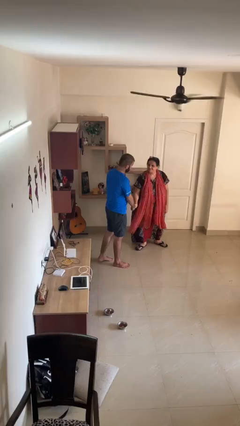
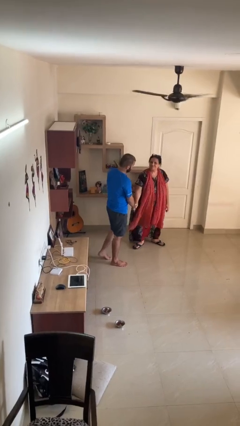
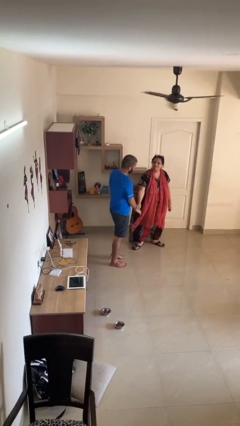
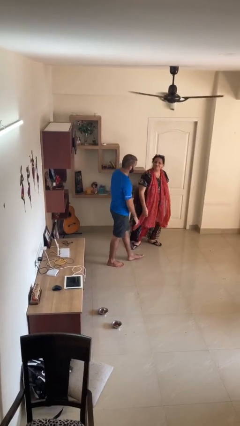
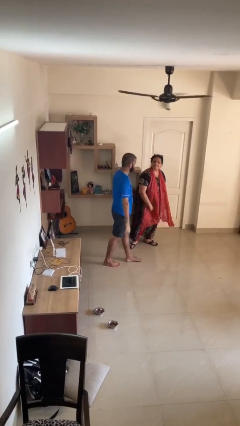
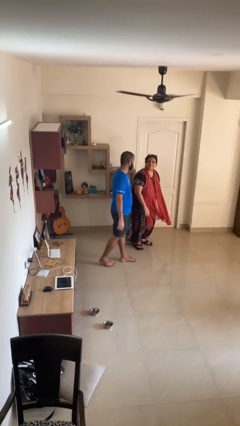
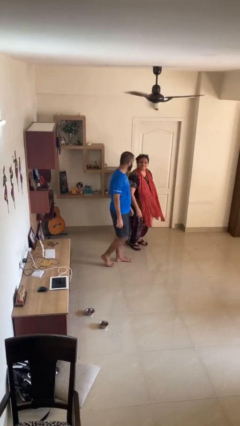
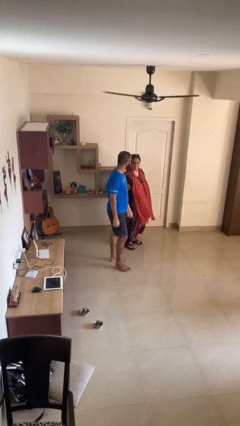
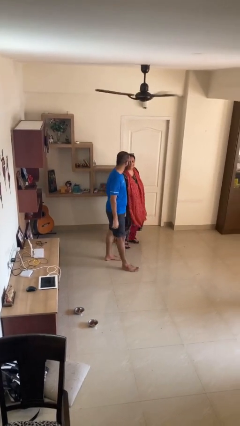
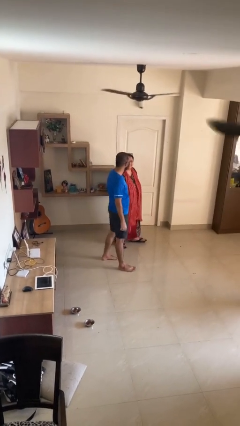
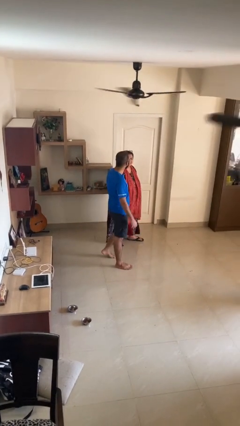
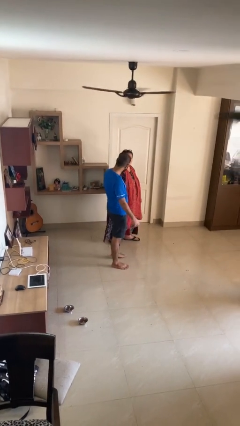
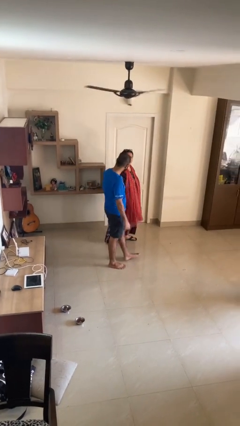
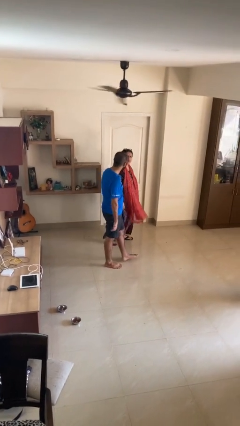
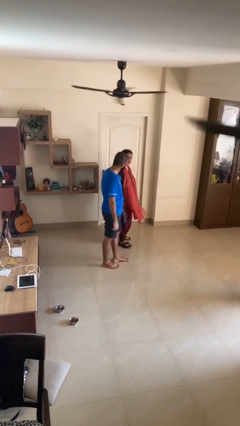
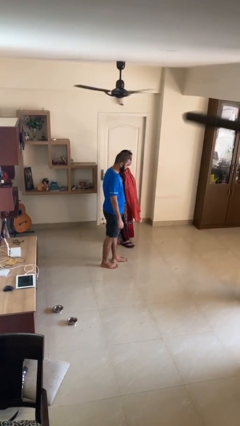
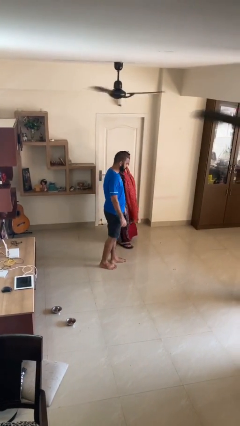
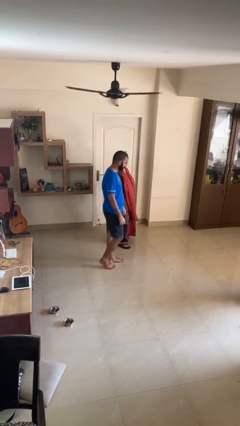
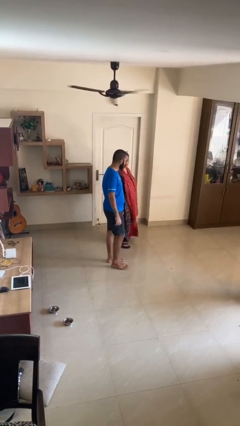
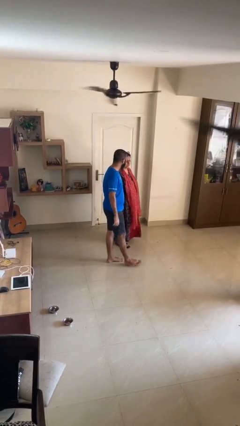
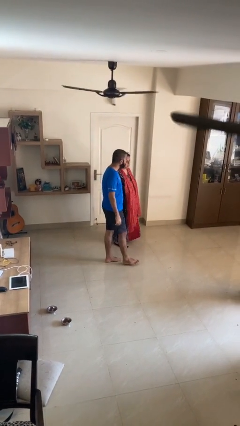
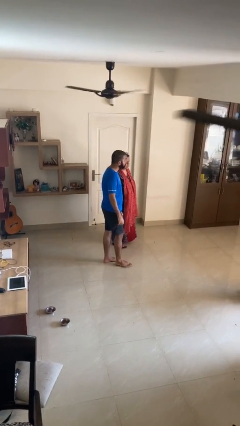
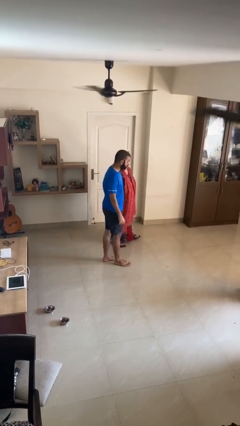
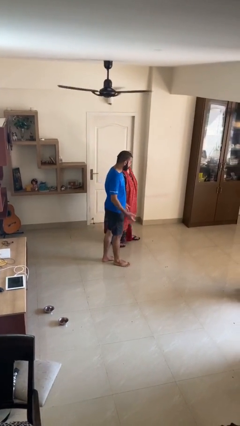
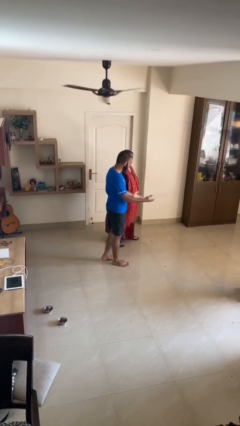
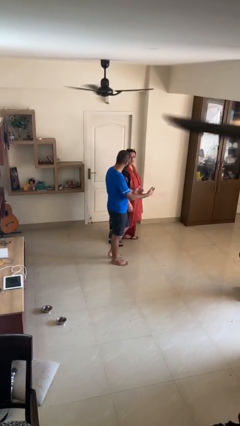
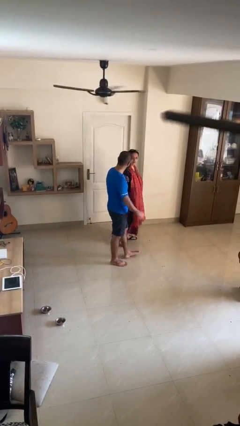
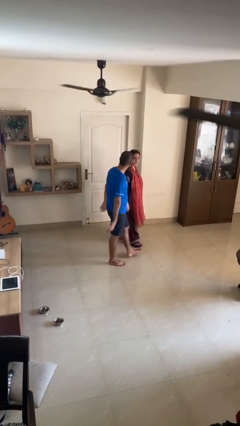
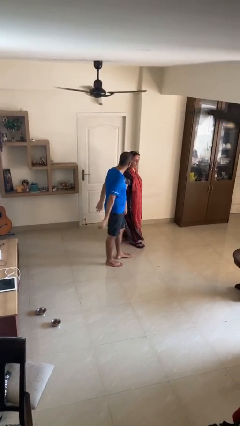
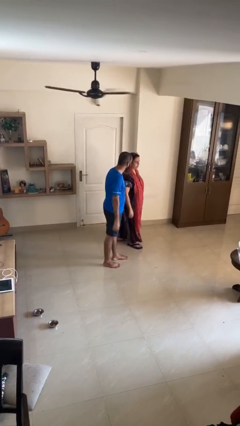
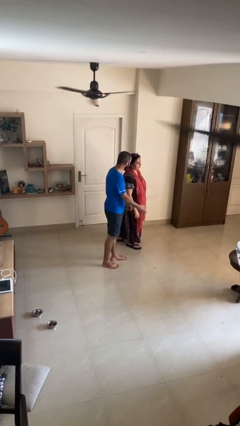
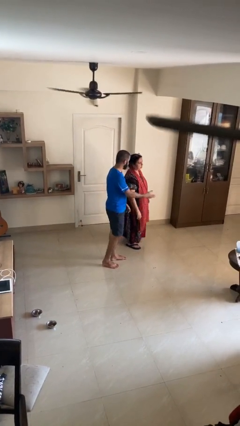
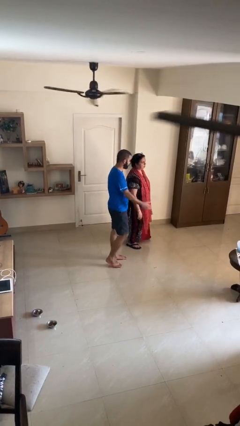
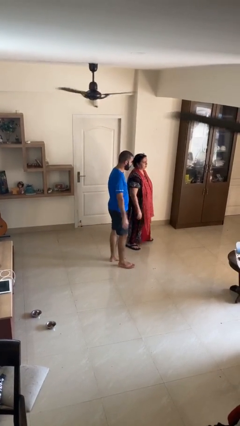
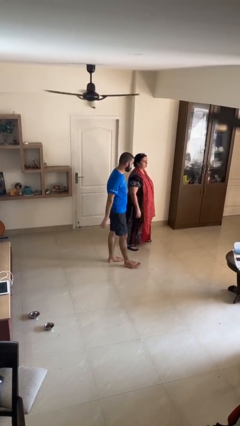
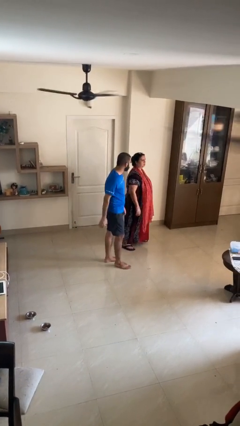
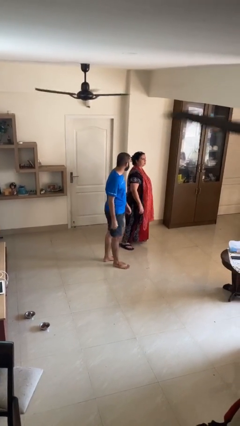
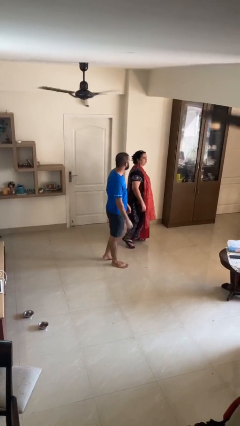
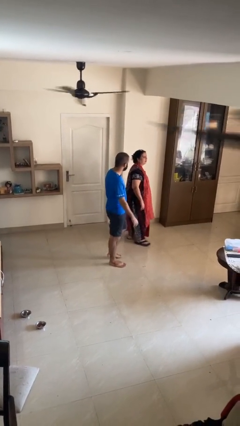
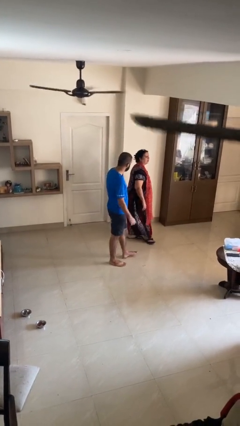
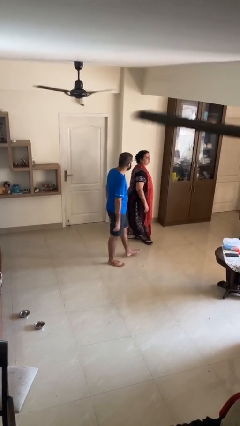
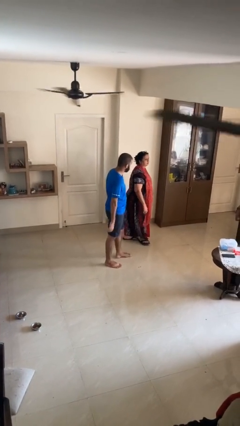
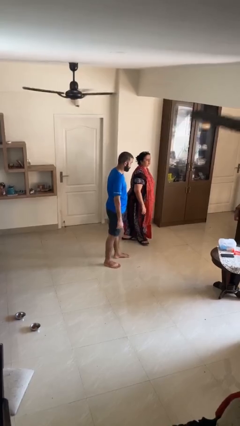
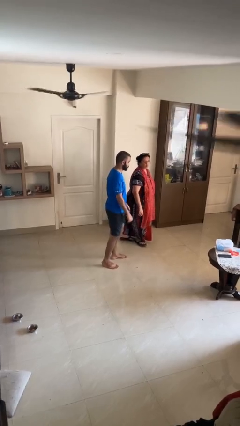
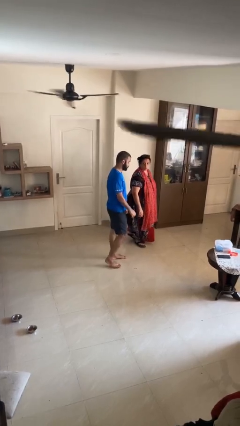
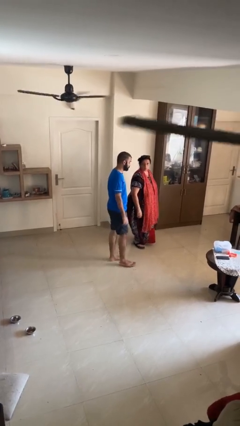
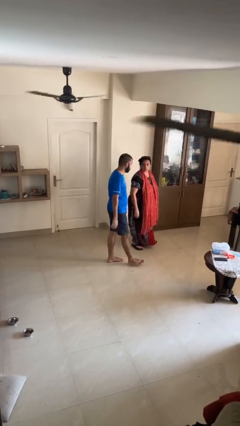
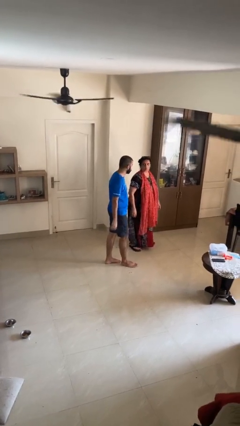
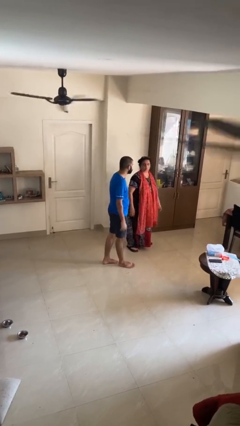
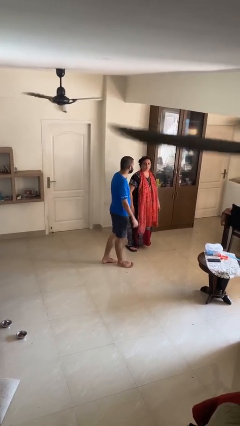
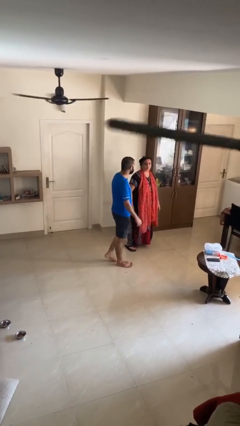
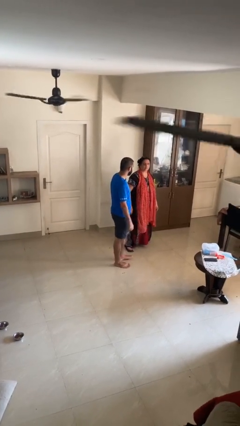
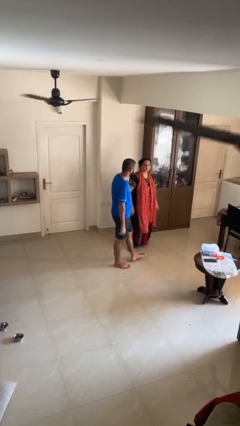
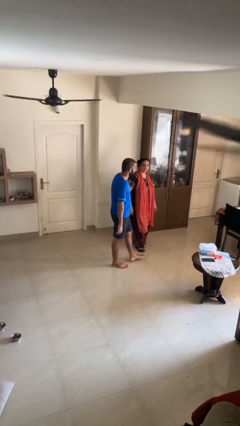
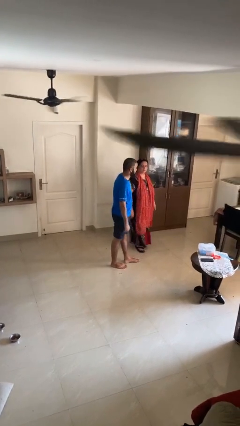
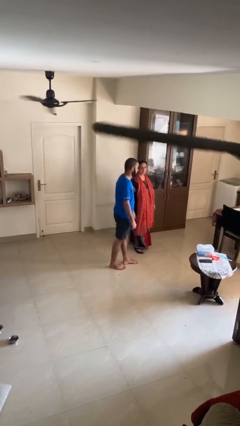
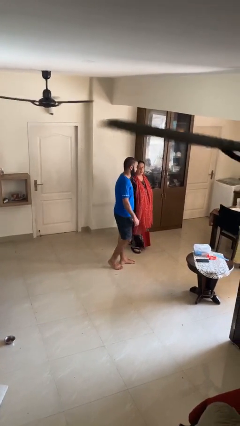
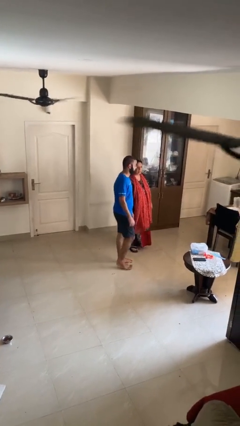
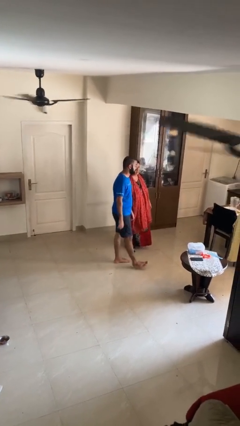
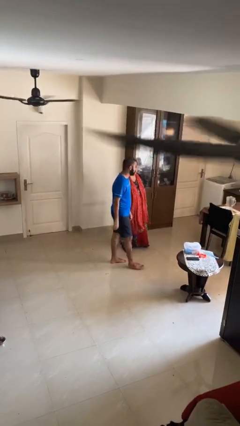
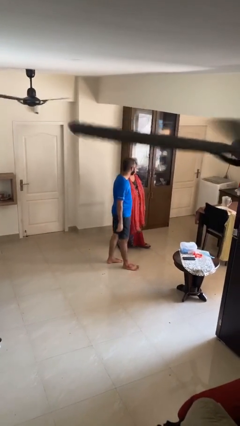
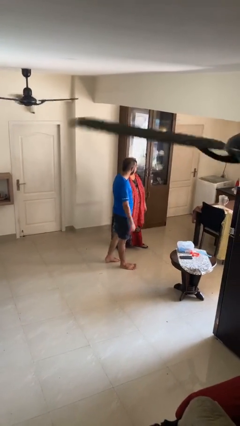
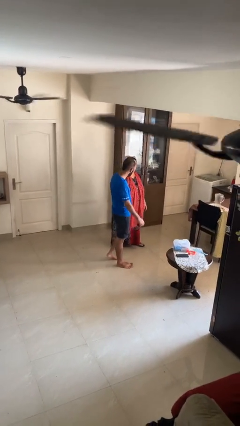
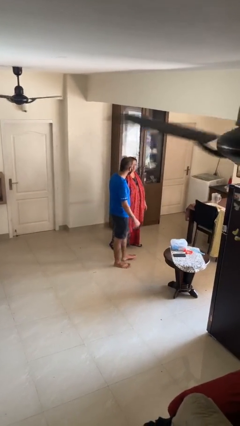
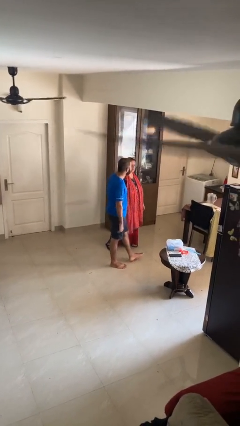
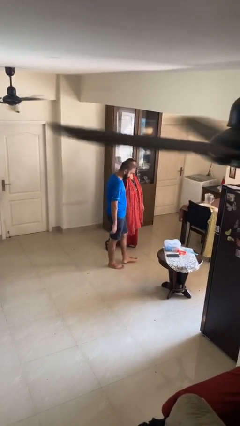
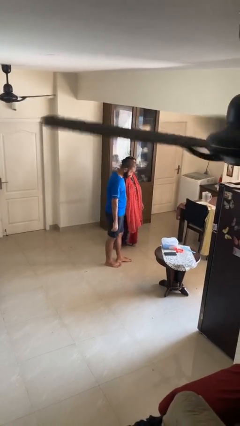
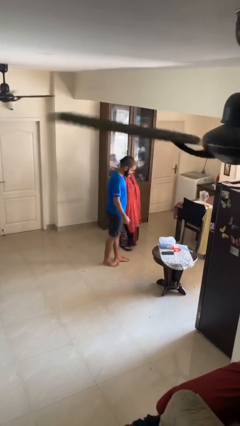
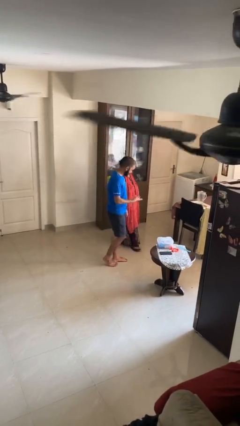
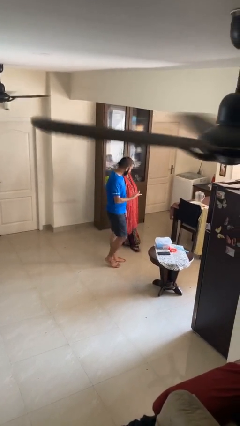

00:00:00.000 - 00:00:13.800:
person talks to person

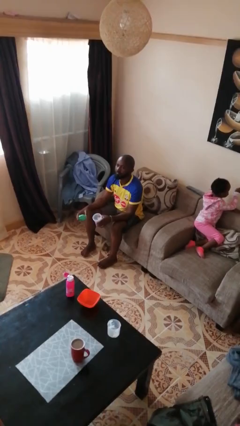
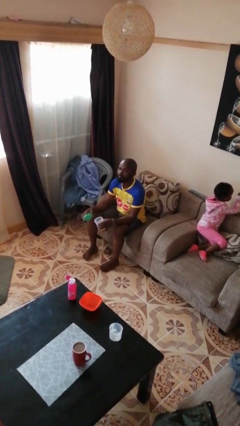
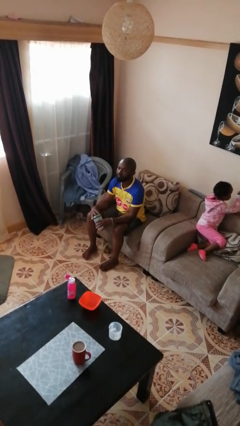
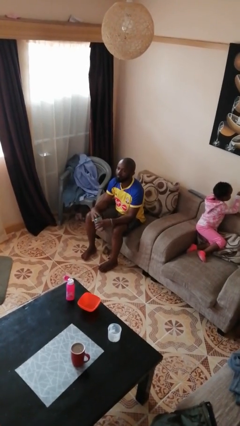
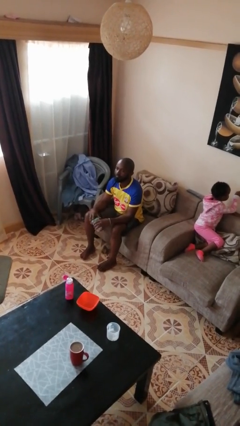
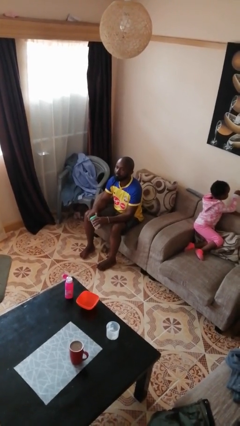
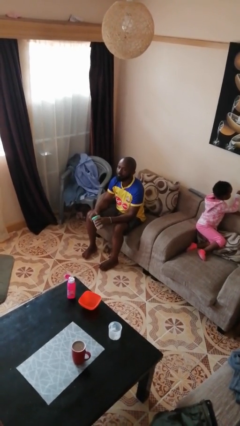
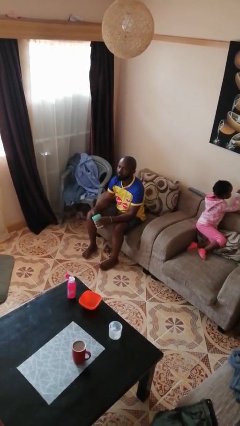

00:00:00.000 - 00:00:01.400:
person closes jar

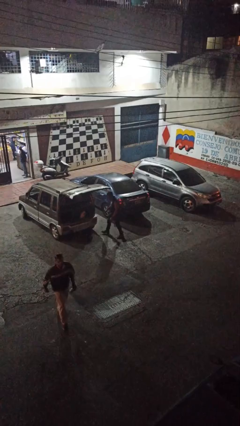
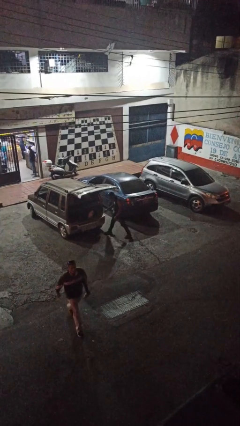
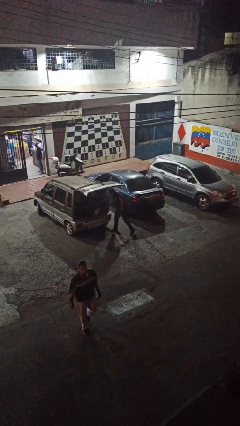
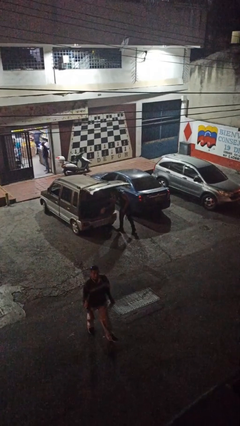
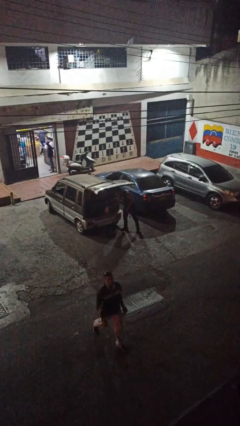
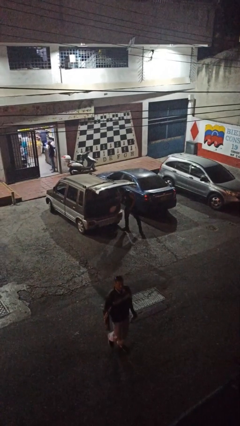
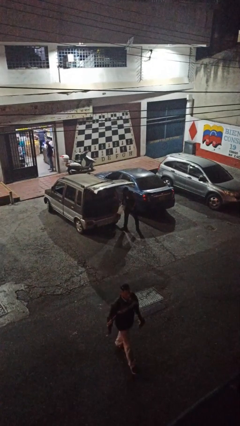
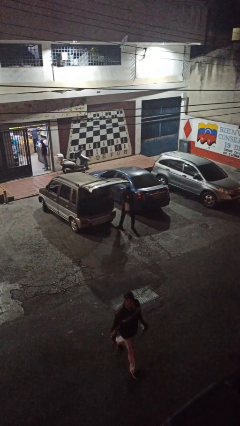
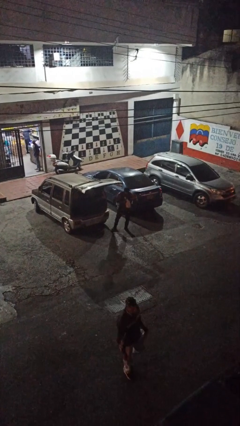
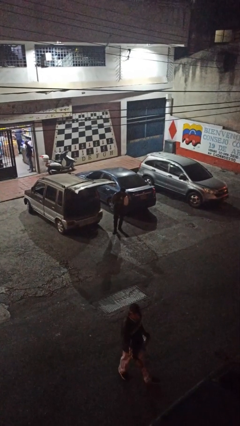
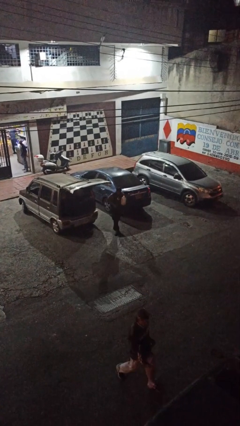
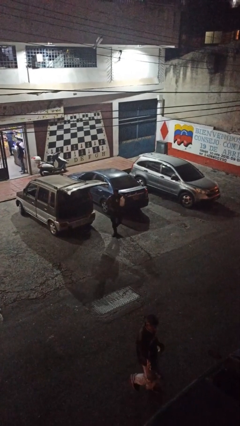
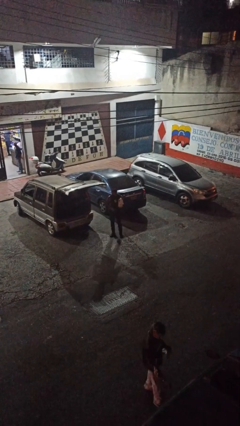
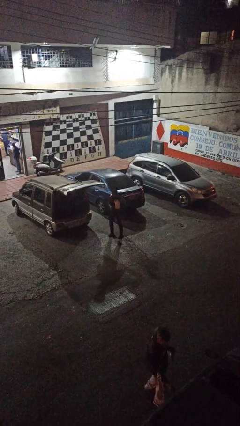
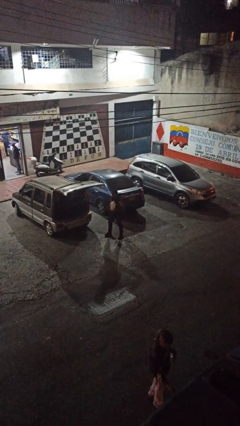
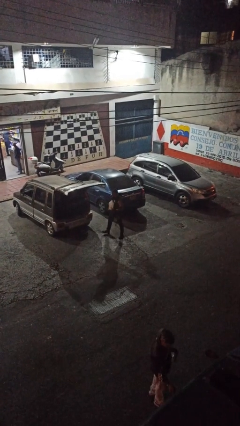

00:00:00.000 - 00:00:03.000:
person unloads car
